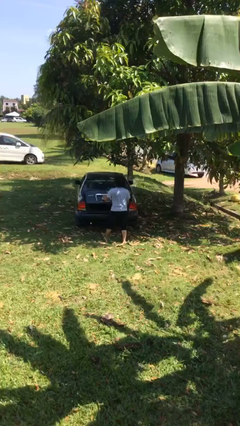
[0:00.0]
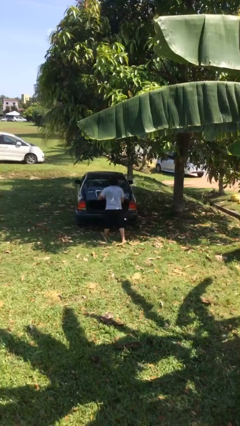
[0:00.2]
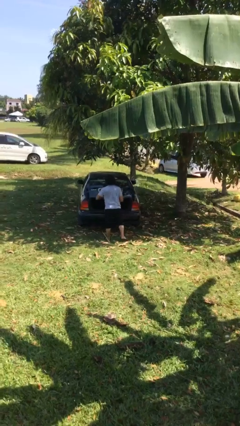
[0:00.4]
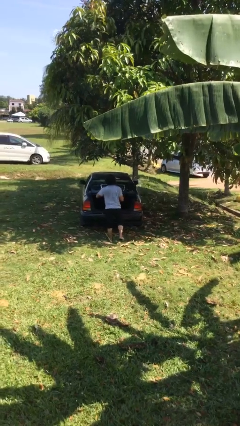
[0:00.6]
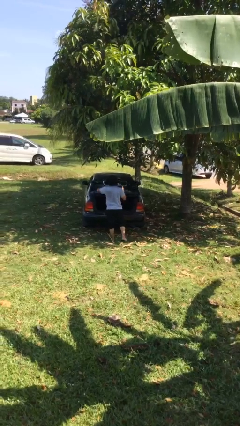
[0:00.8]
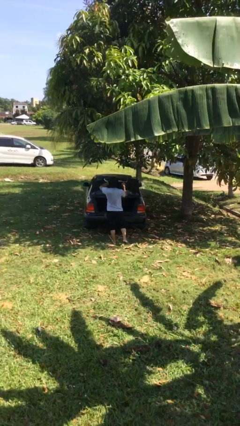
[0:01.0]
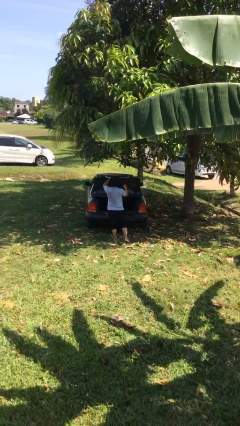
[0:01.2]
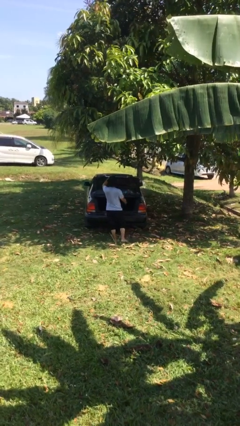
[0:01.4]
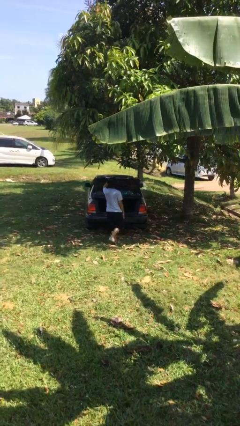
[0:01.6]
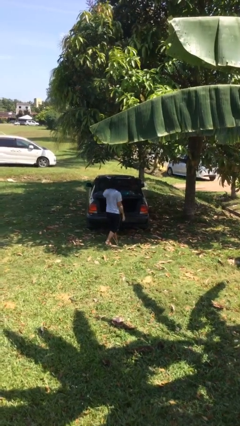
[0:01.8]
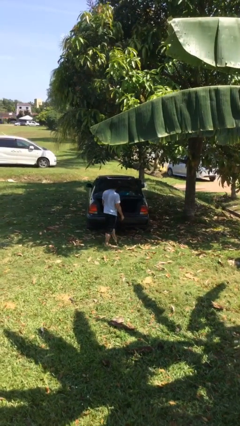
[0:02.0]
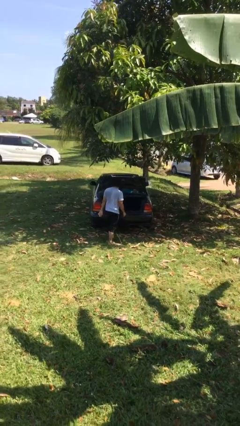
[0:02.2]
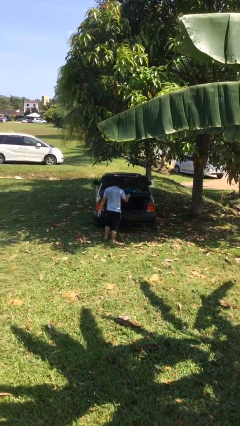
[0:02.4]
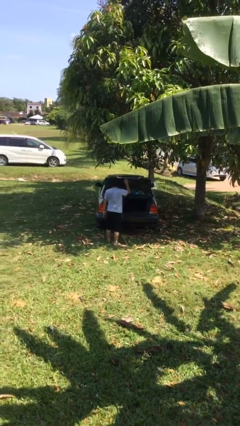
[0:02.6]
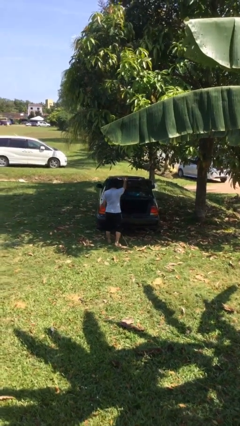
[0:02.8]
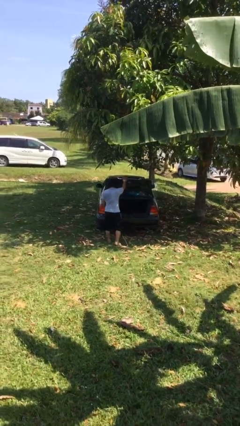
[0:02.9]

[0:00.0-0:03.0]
person opens car trunk

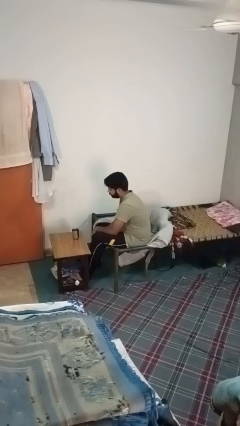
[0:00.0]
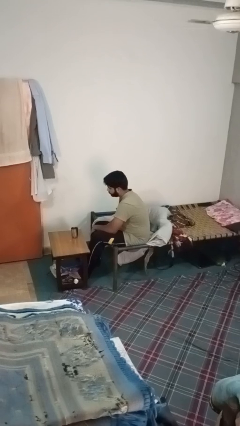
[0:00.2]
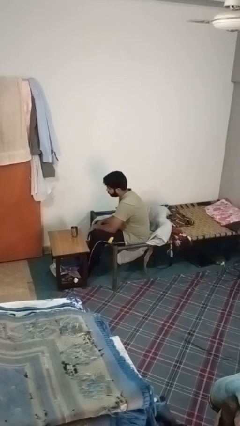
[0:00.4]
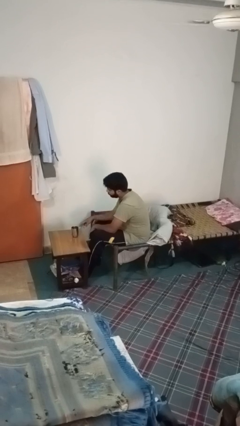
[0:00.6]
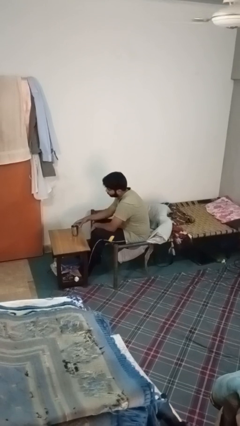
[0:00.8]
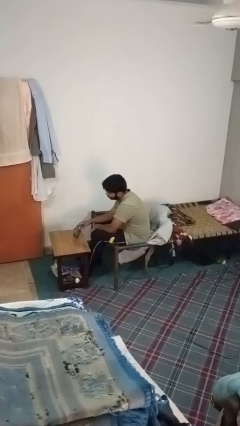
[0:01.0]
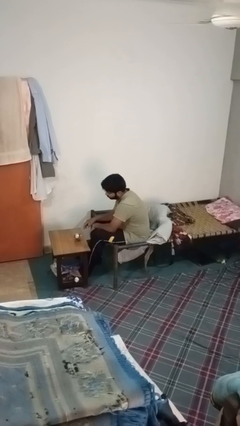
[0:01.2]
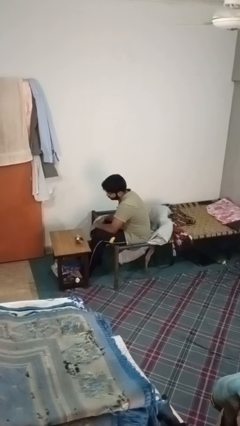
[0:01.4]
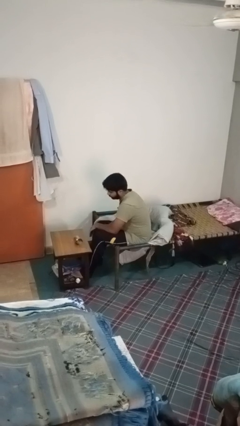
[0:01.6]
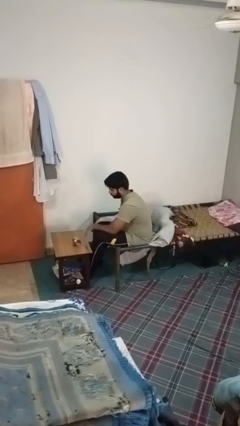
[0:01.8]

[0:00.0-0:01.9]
person knocks over glass

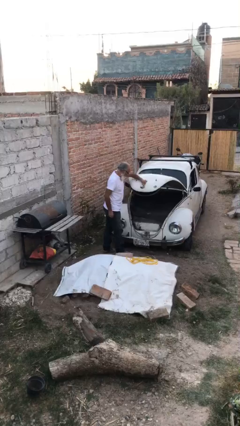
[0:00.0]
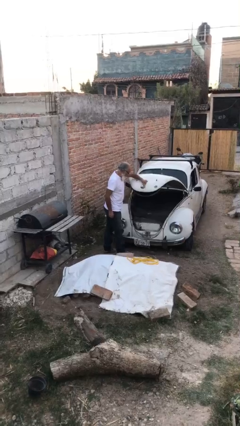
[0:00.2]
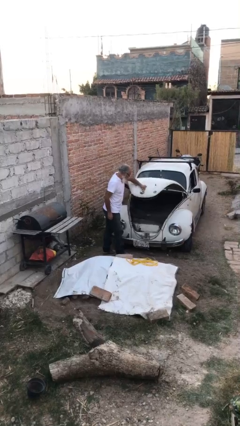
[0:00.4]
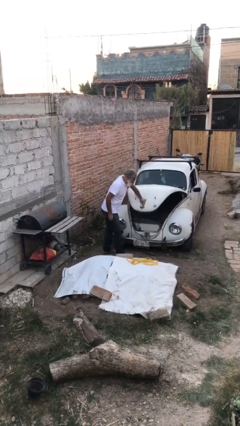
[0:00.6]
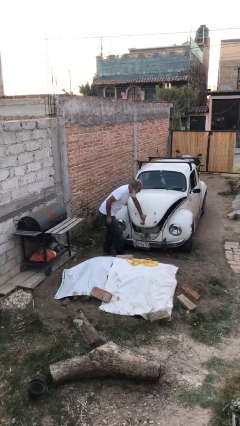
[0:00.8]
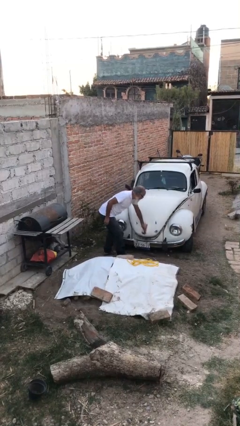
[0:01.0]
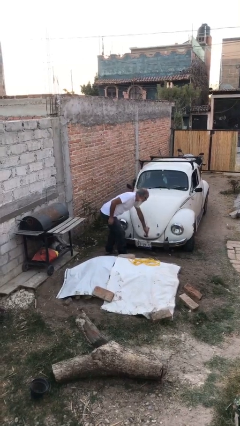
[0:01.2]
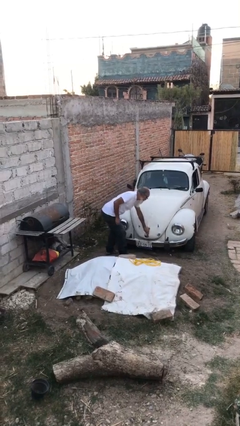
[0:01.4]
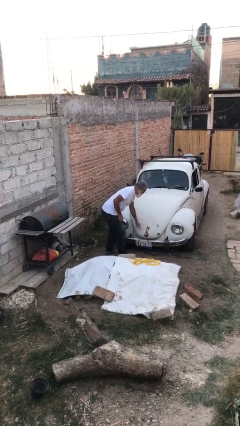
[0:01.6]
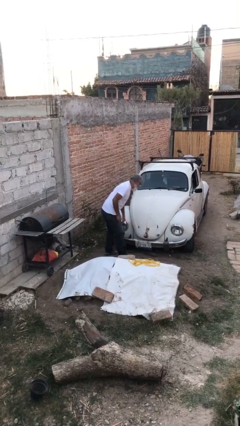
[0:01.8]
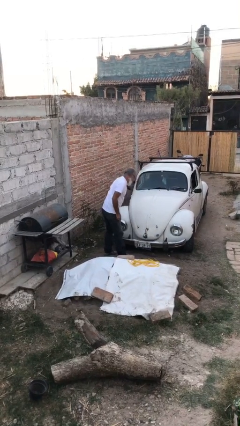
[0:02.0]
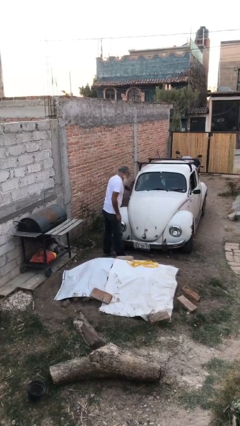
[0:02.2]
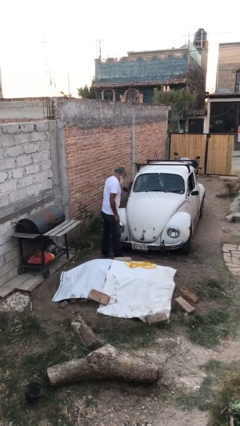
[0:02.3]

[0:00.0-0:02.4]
person closes car trunk

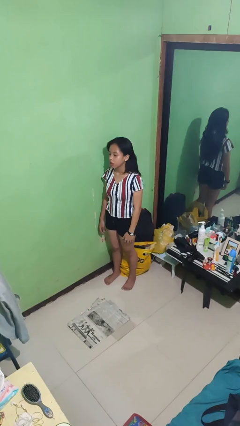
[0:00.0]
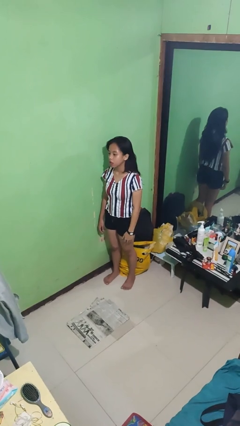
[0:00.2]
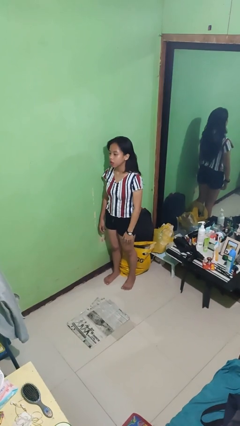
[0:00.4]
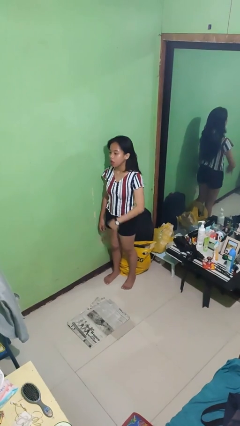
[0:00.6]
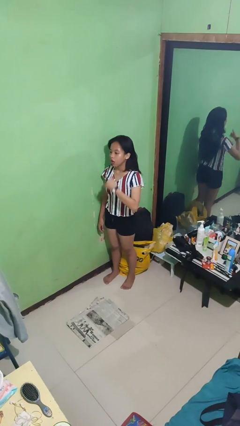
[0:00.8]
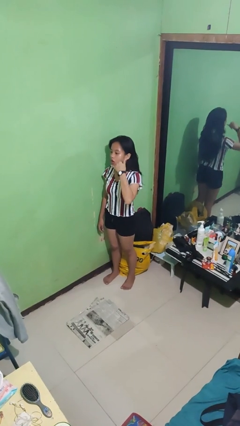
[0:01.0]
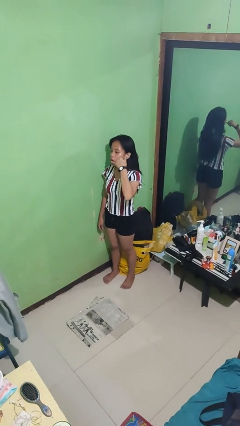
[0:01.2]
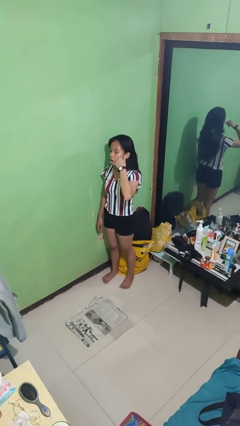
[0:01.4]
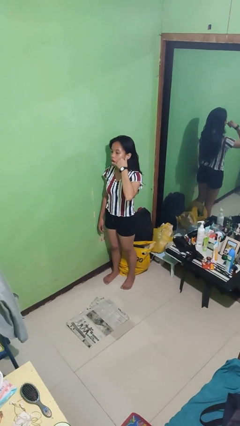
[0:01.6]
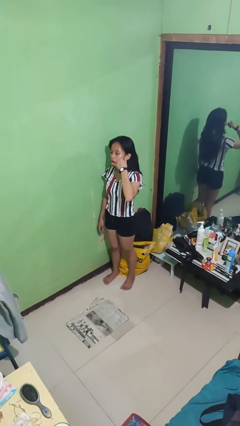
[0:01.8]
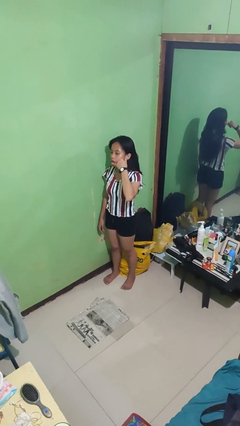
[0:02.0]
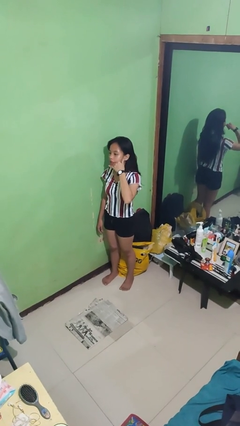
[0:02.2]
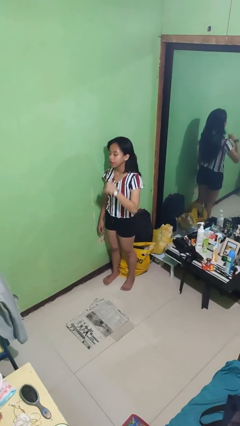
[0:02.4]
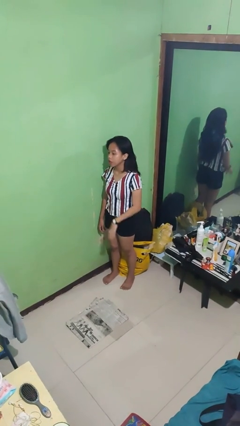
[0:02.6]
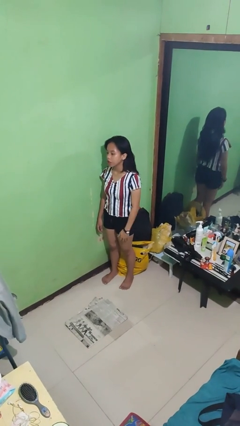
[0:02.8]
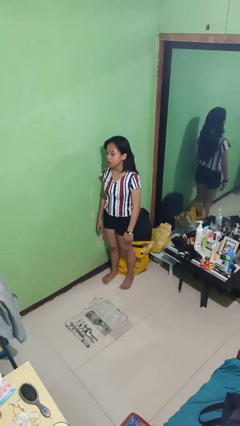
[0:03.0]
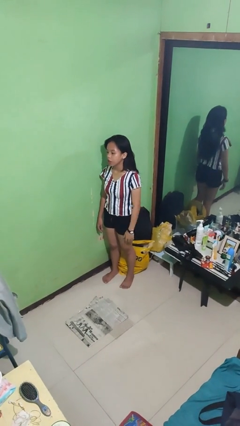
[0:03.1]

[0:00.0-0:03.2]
person gestures call me

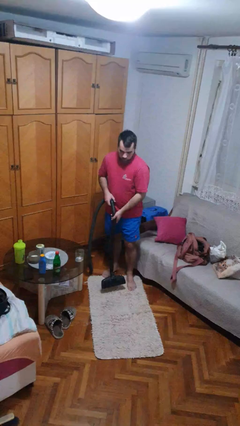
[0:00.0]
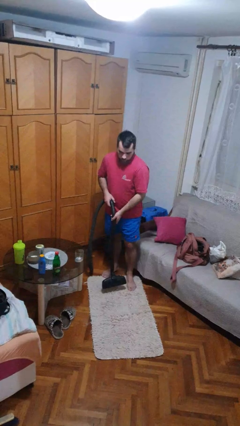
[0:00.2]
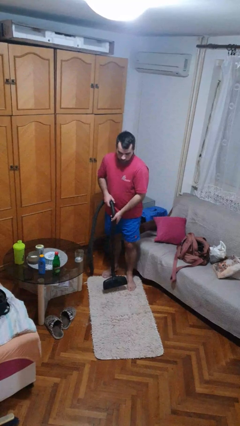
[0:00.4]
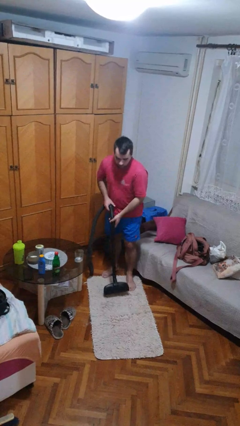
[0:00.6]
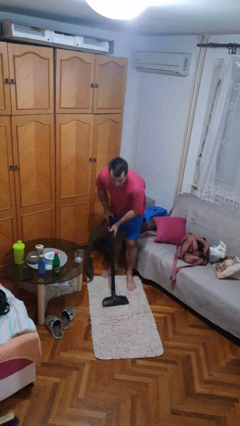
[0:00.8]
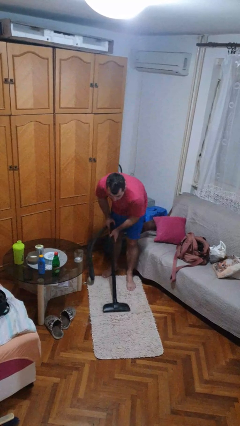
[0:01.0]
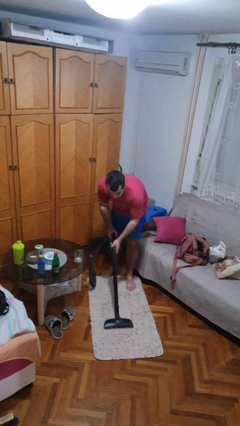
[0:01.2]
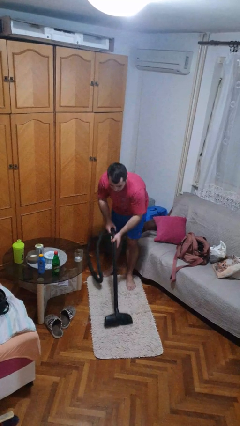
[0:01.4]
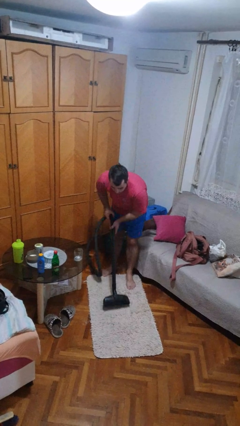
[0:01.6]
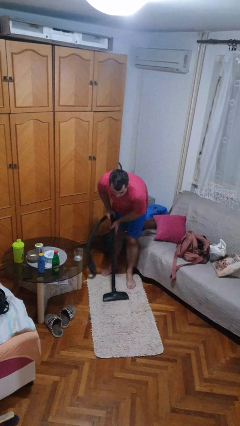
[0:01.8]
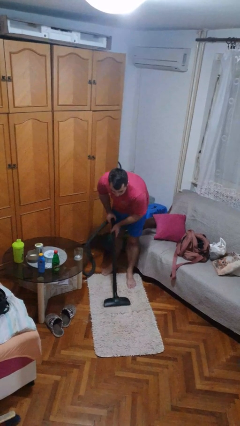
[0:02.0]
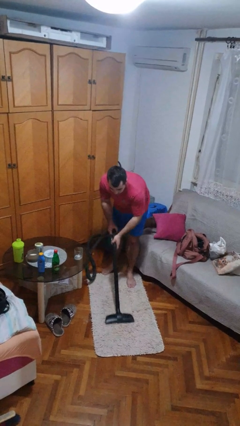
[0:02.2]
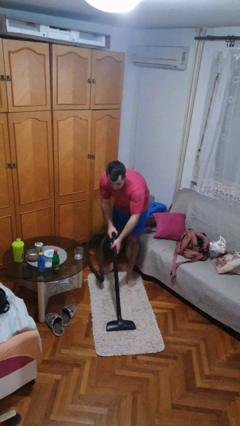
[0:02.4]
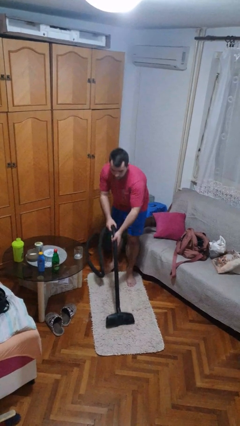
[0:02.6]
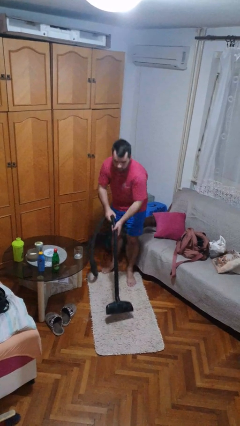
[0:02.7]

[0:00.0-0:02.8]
person vacuums carpet

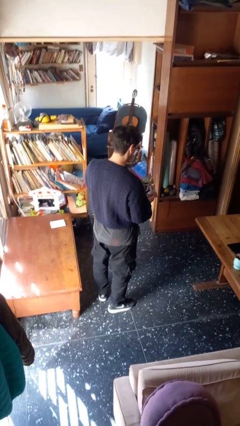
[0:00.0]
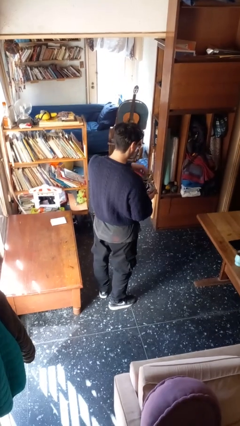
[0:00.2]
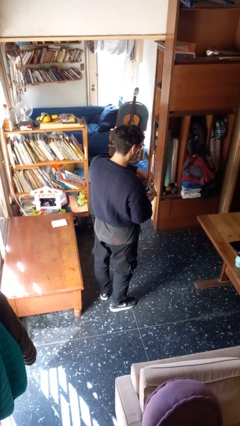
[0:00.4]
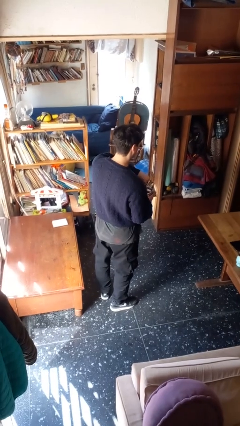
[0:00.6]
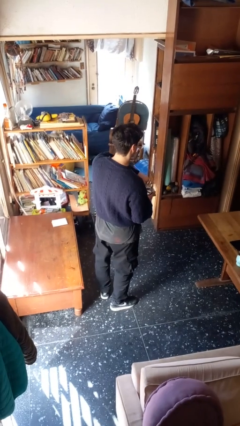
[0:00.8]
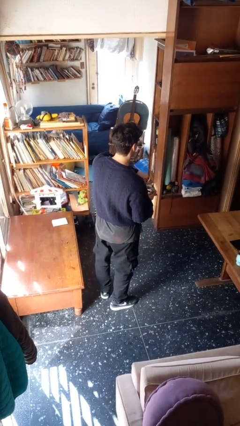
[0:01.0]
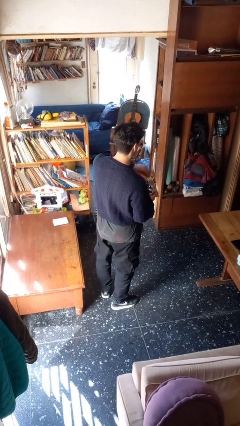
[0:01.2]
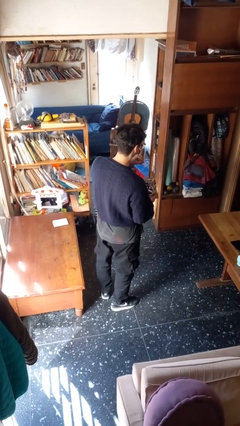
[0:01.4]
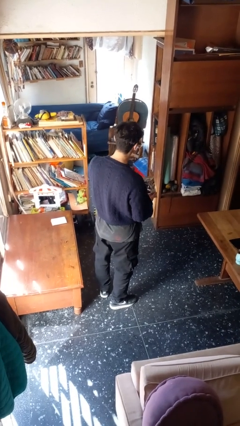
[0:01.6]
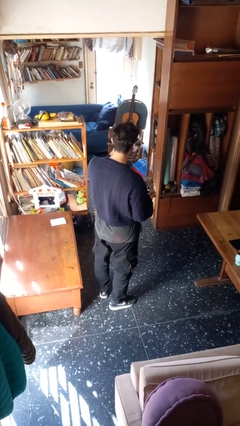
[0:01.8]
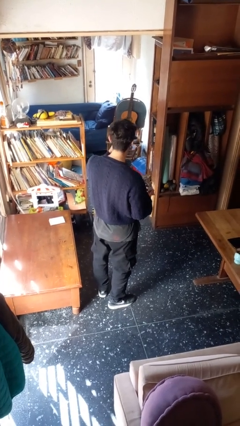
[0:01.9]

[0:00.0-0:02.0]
person eats snack from bag

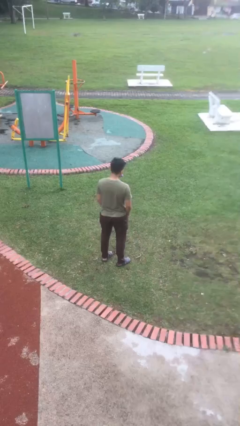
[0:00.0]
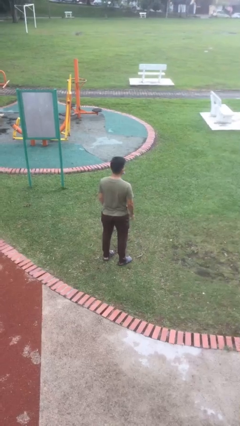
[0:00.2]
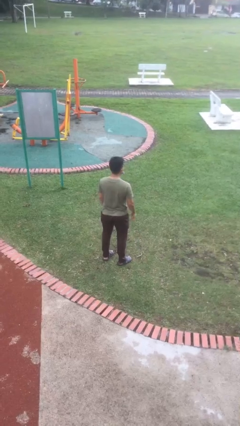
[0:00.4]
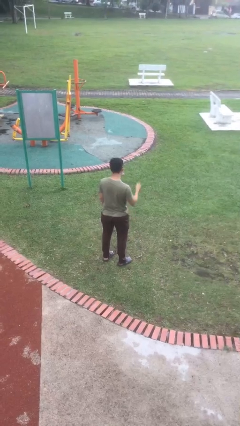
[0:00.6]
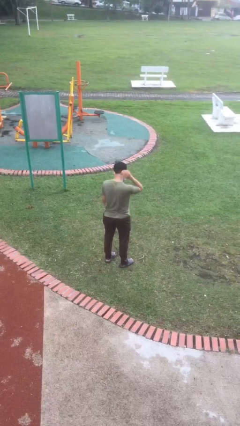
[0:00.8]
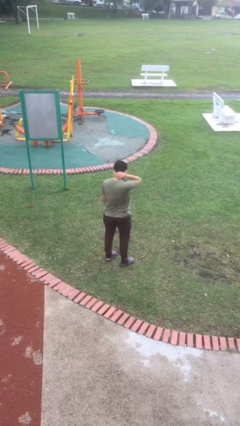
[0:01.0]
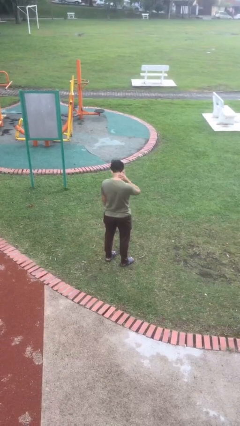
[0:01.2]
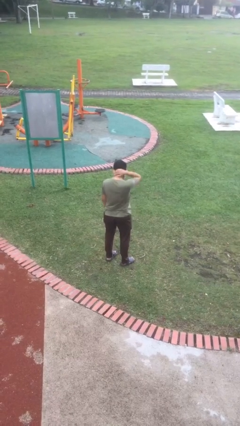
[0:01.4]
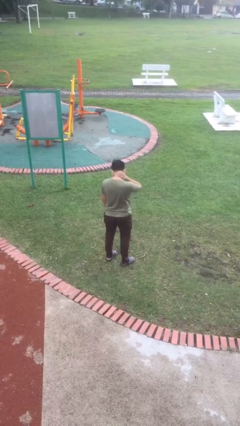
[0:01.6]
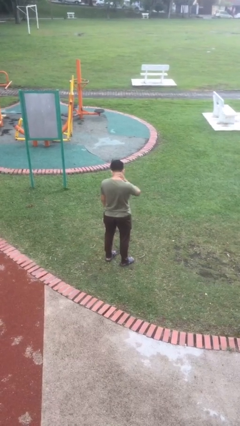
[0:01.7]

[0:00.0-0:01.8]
person rubs neck
